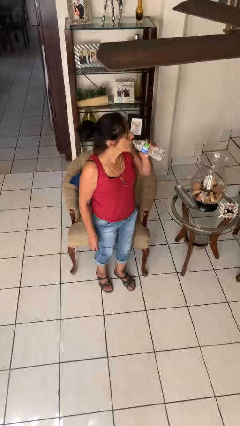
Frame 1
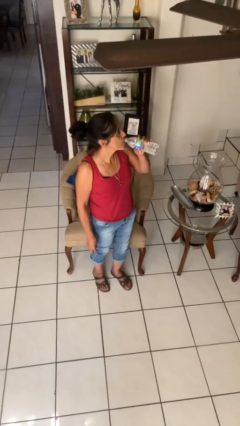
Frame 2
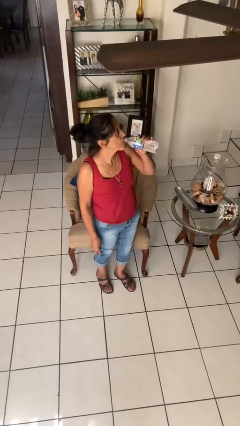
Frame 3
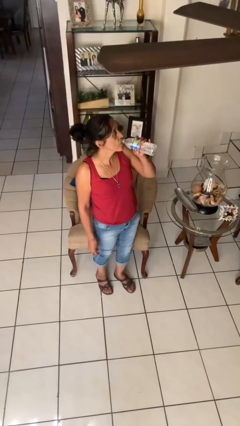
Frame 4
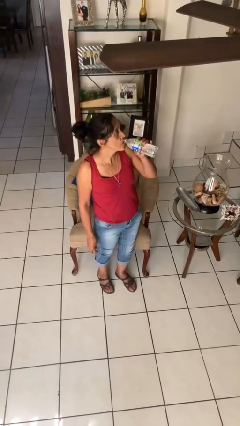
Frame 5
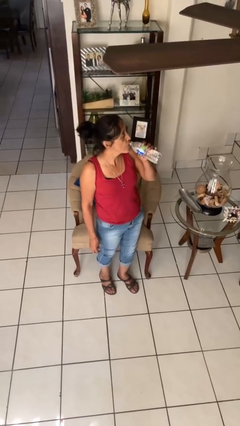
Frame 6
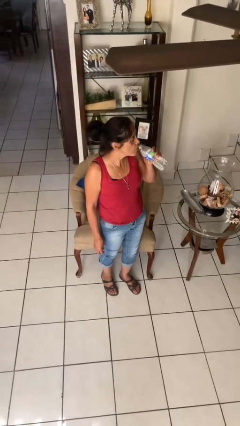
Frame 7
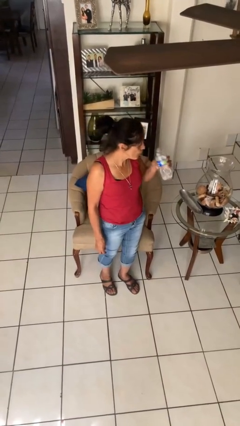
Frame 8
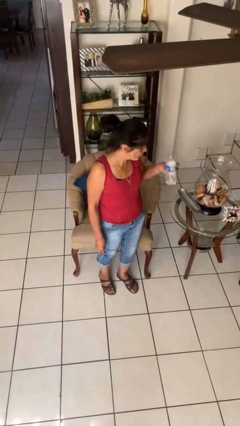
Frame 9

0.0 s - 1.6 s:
person drinks from bottle

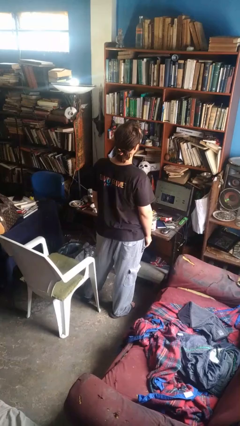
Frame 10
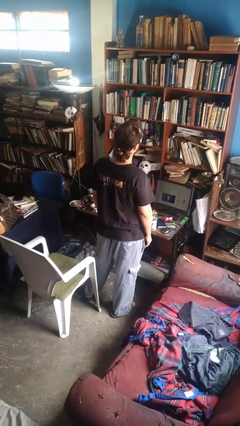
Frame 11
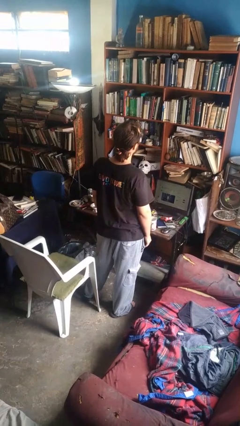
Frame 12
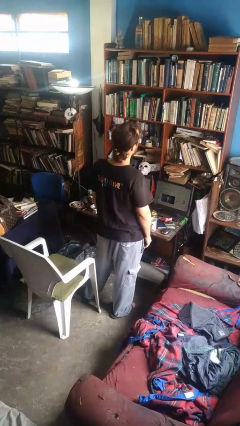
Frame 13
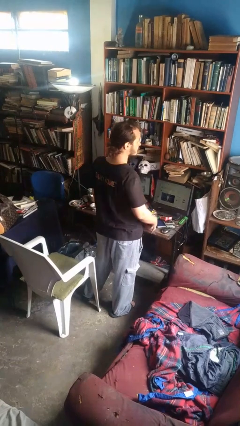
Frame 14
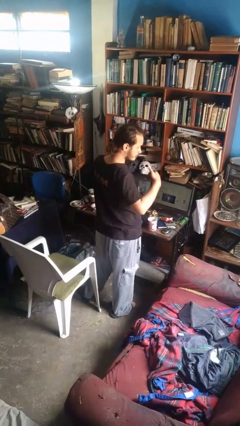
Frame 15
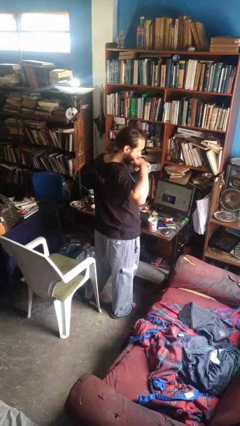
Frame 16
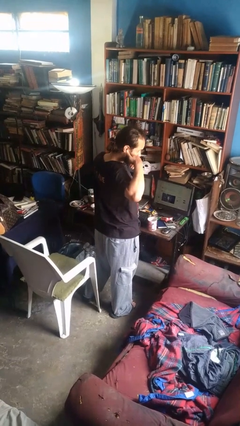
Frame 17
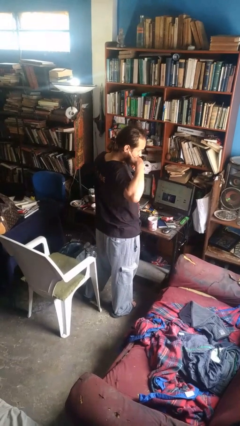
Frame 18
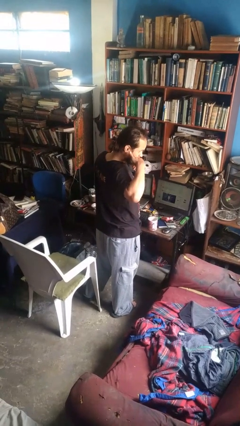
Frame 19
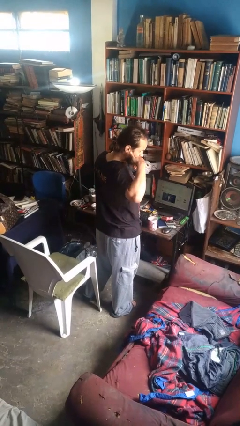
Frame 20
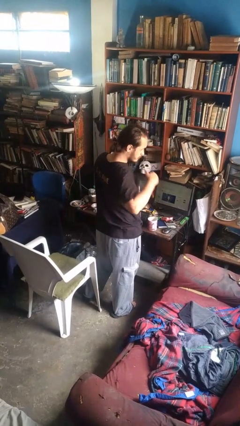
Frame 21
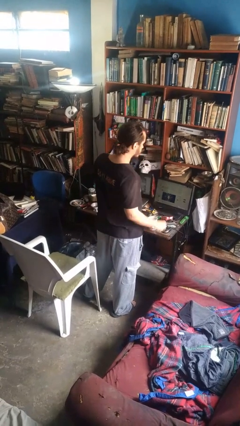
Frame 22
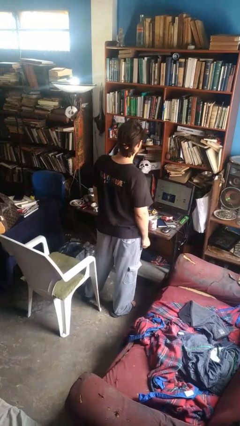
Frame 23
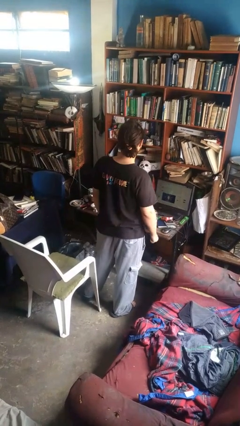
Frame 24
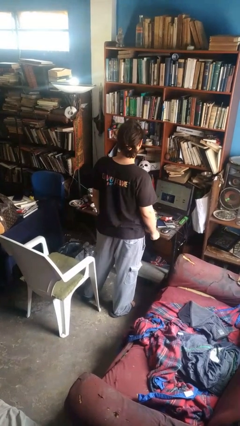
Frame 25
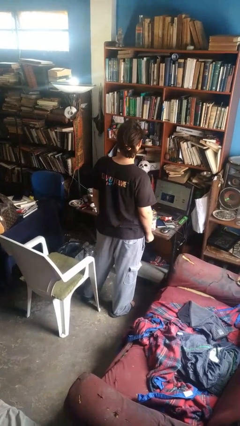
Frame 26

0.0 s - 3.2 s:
person gestures call me

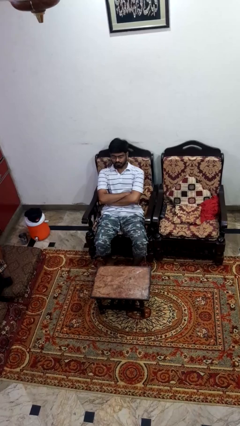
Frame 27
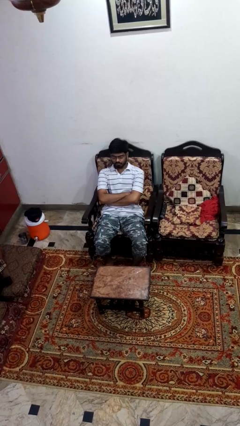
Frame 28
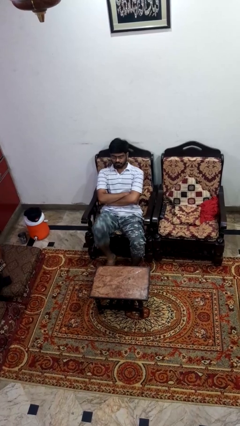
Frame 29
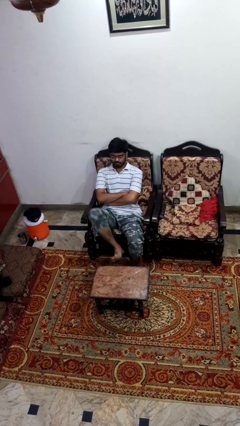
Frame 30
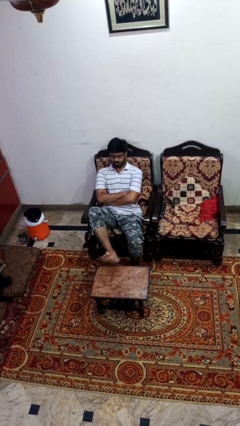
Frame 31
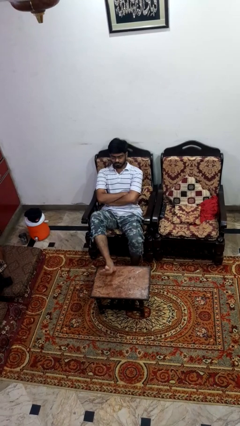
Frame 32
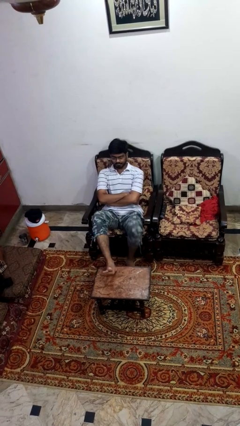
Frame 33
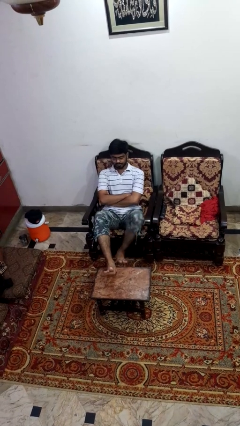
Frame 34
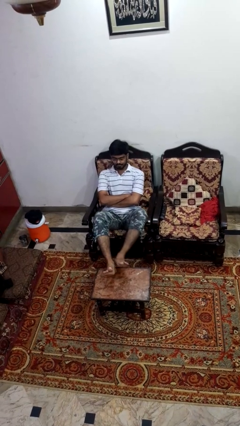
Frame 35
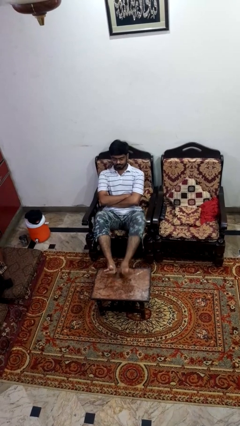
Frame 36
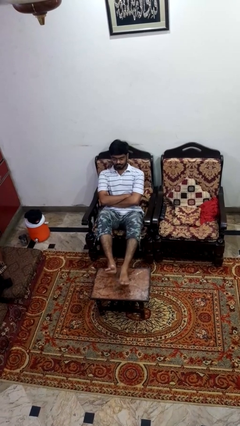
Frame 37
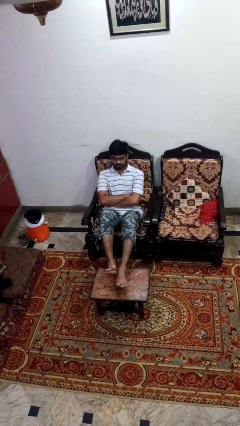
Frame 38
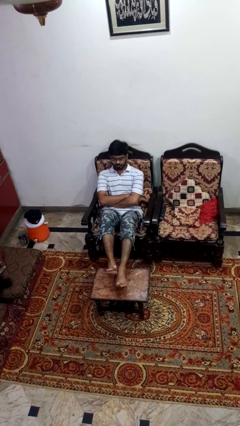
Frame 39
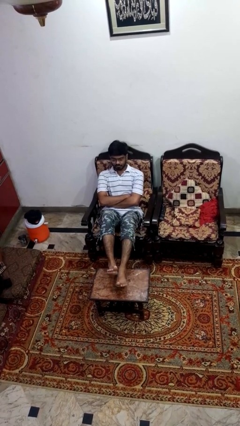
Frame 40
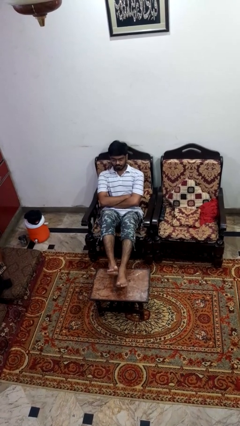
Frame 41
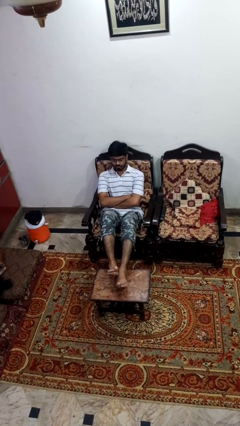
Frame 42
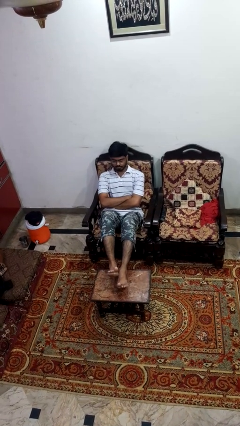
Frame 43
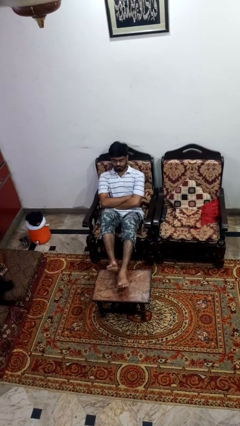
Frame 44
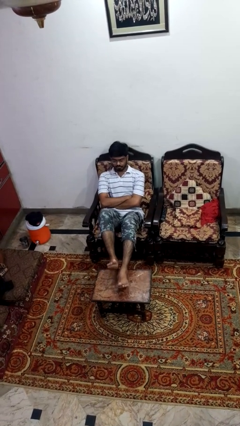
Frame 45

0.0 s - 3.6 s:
person puts feet up

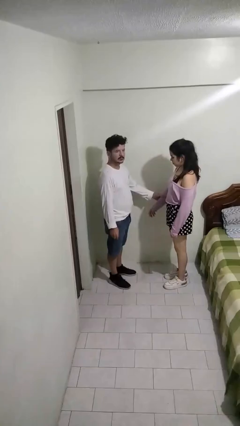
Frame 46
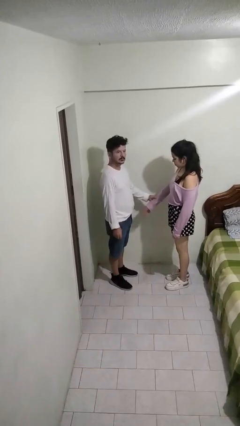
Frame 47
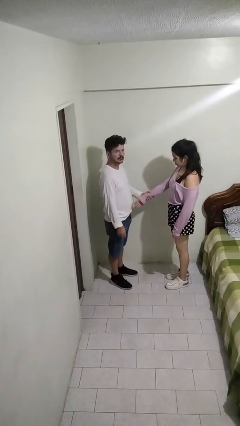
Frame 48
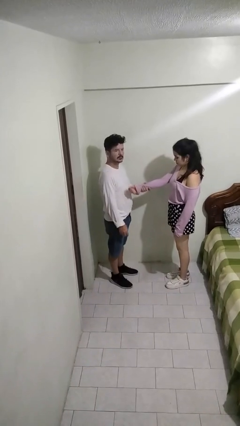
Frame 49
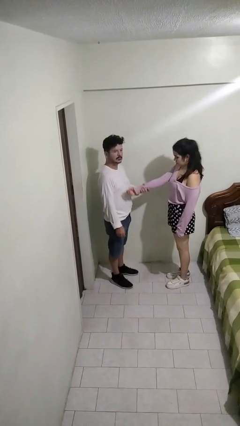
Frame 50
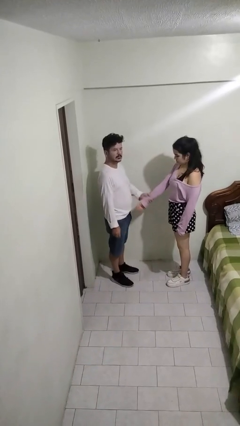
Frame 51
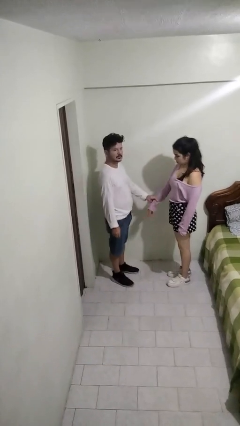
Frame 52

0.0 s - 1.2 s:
person grabs person by forearm

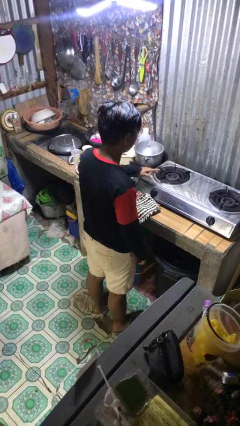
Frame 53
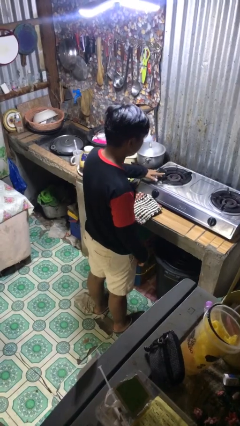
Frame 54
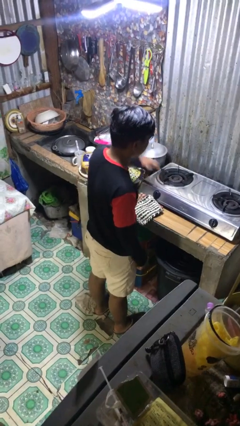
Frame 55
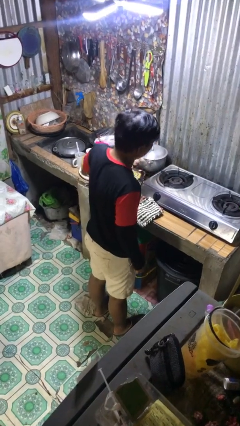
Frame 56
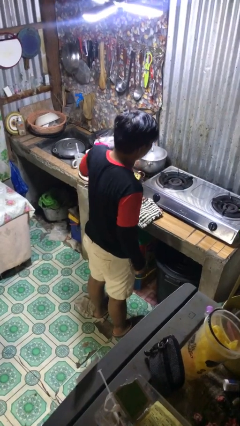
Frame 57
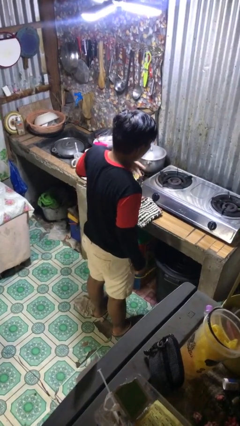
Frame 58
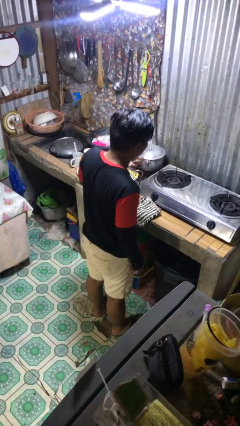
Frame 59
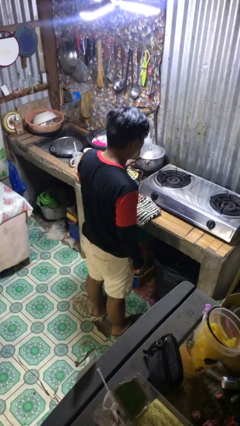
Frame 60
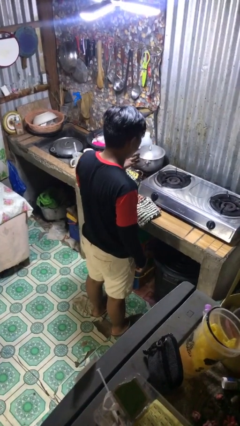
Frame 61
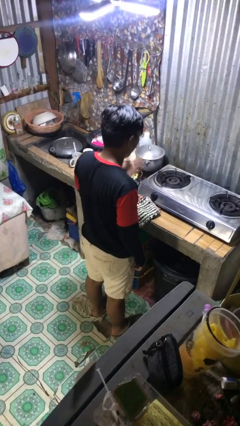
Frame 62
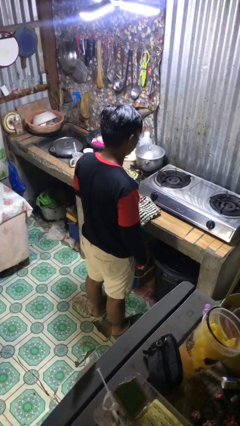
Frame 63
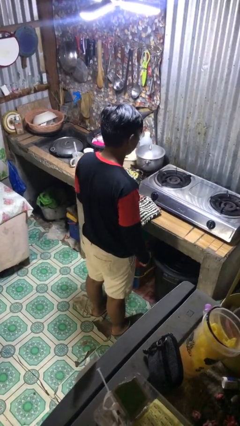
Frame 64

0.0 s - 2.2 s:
person burns hand

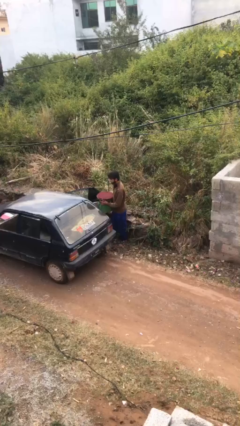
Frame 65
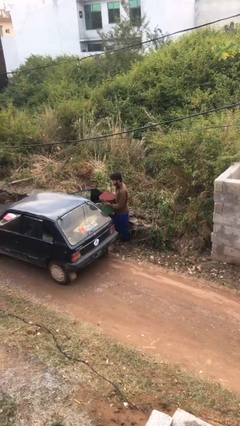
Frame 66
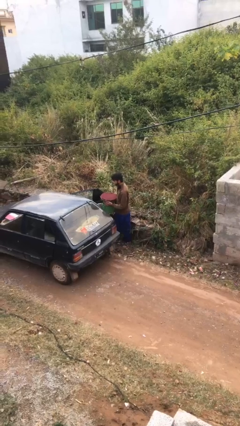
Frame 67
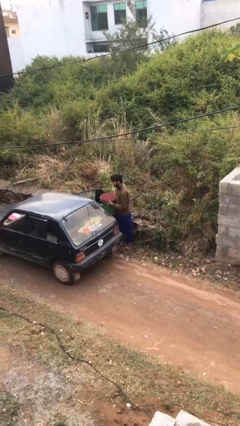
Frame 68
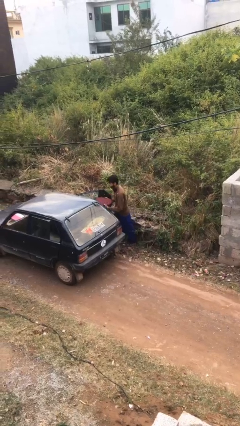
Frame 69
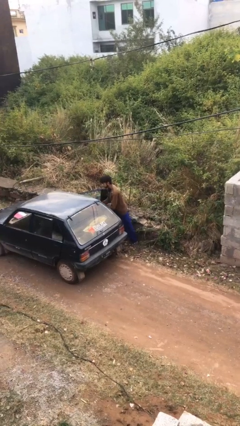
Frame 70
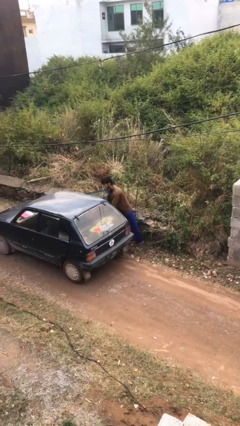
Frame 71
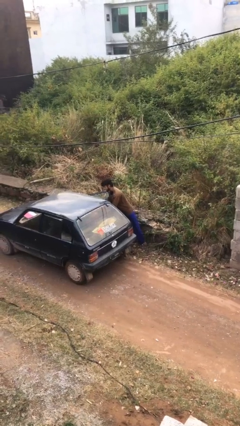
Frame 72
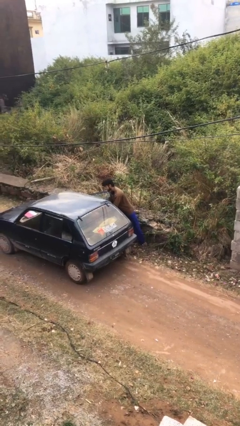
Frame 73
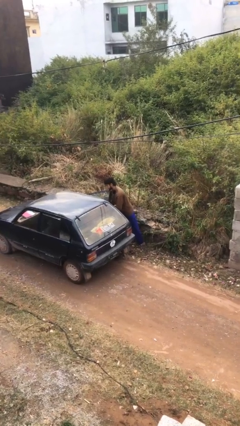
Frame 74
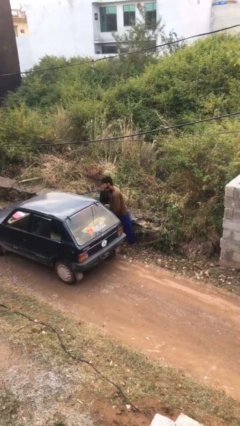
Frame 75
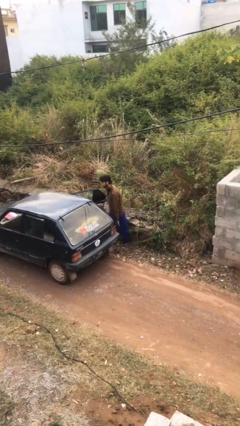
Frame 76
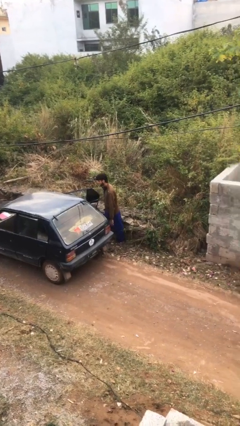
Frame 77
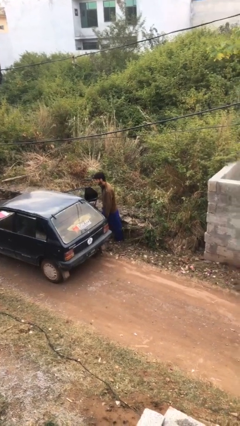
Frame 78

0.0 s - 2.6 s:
person loads car

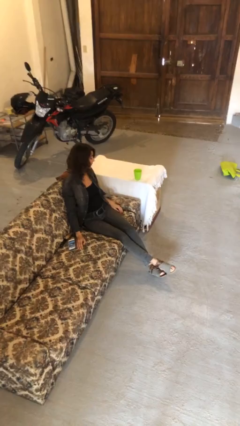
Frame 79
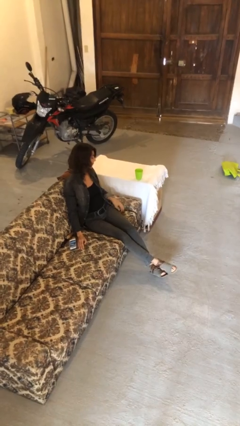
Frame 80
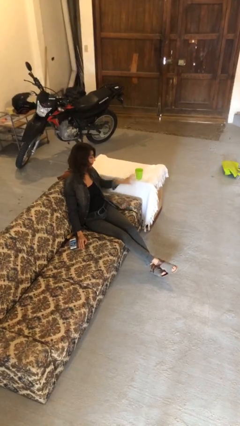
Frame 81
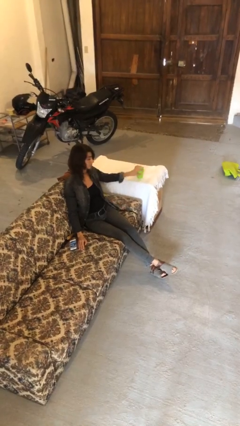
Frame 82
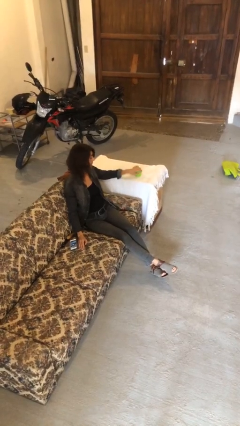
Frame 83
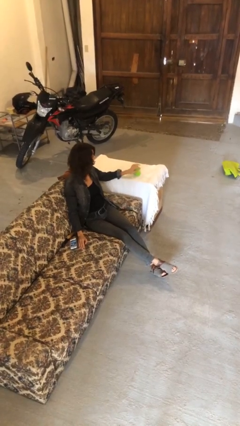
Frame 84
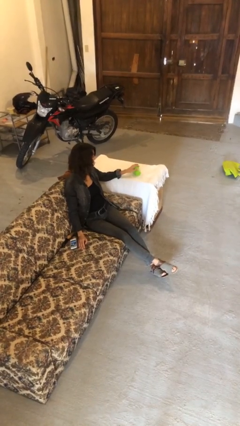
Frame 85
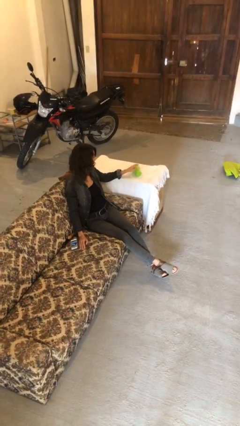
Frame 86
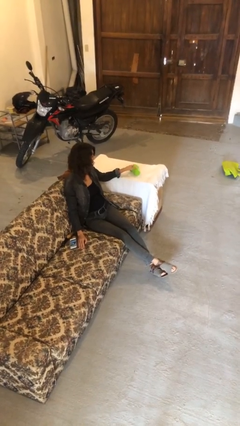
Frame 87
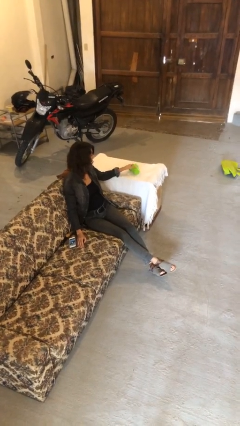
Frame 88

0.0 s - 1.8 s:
person knocks over glass

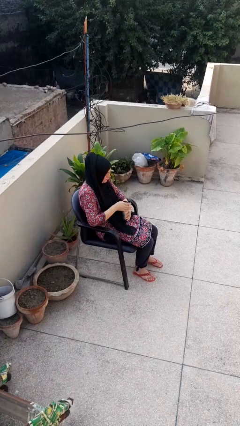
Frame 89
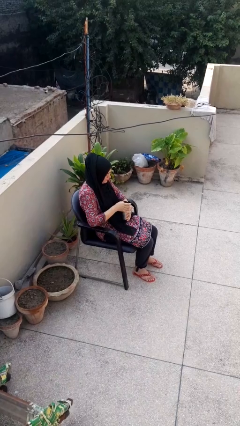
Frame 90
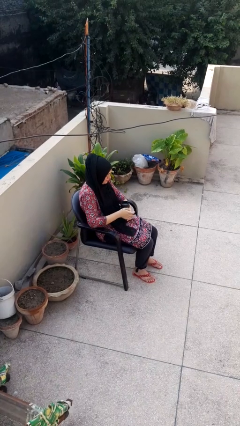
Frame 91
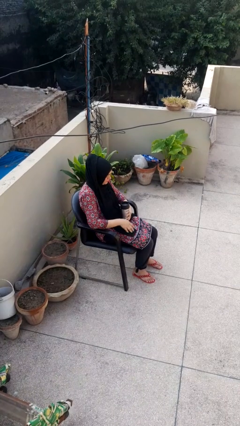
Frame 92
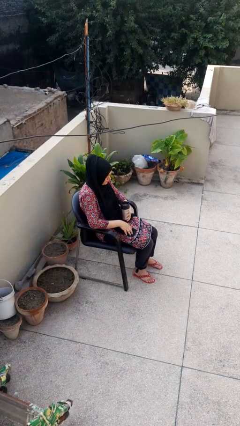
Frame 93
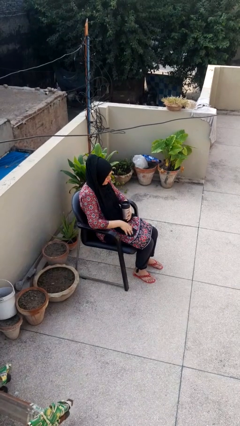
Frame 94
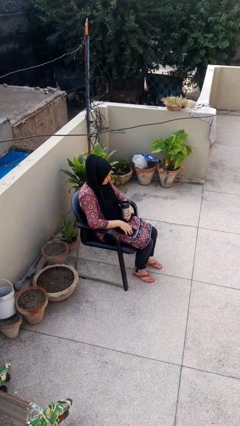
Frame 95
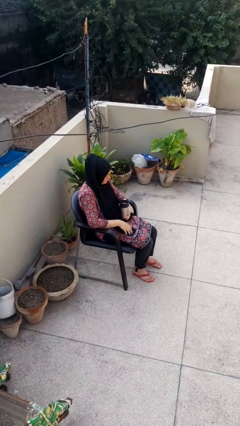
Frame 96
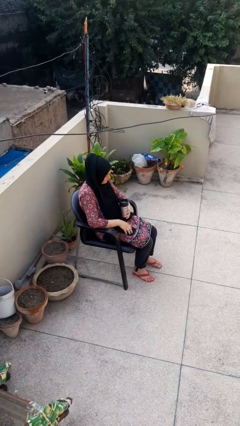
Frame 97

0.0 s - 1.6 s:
person opens beverage can
